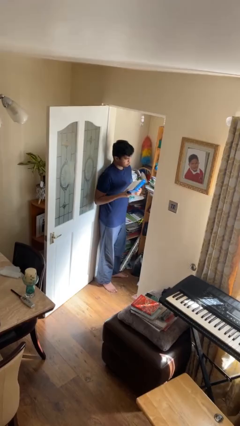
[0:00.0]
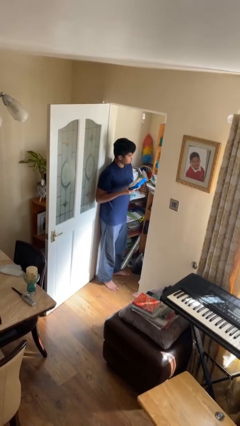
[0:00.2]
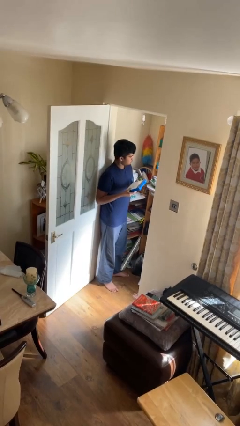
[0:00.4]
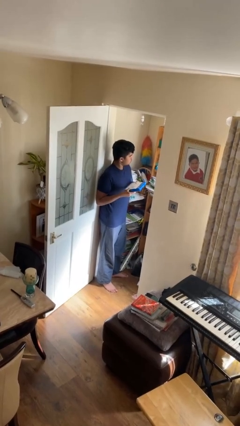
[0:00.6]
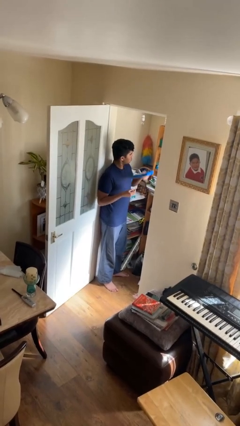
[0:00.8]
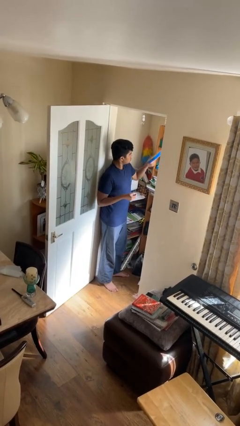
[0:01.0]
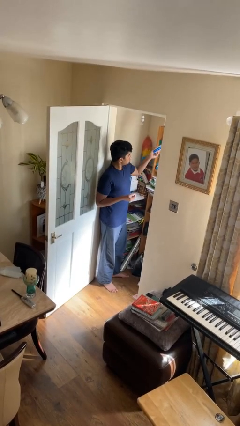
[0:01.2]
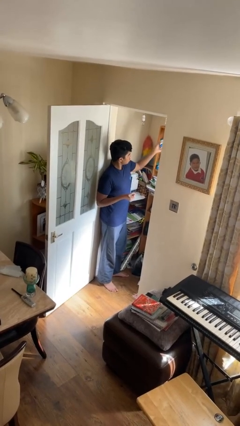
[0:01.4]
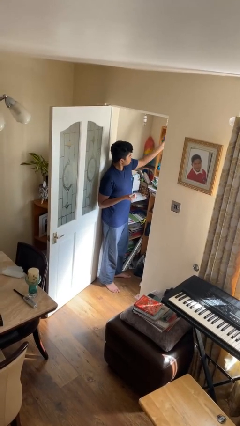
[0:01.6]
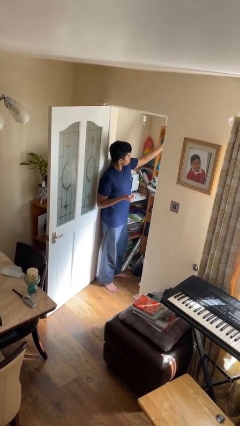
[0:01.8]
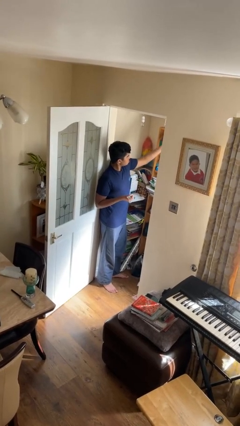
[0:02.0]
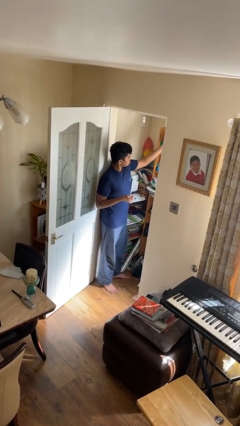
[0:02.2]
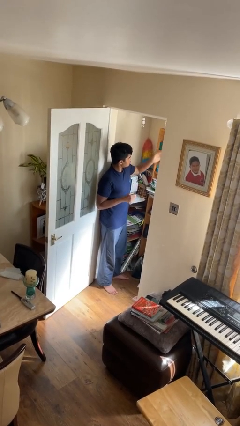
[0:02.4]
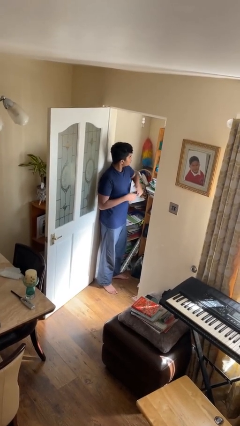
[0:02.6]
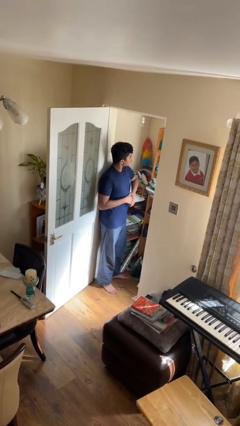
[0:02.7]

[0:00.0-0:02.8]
person puts down object on shelf

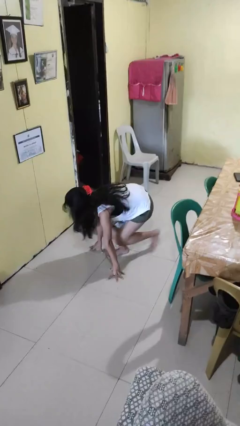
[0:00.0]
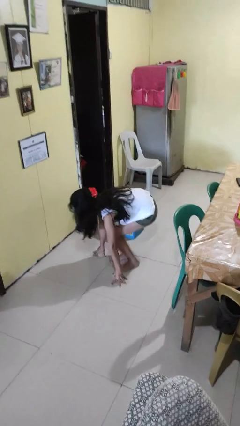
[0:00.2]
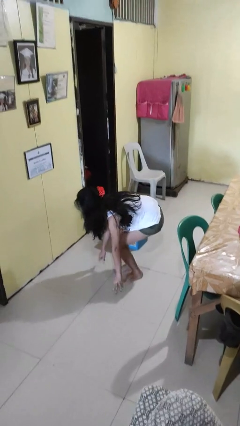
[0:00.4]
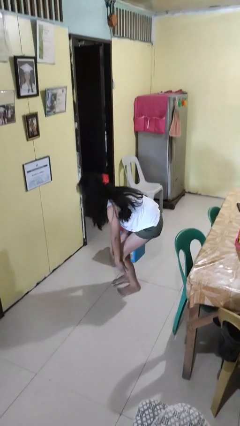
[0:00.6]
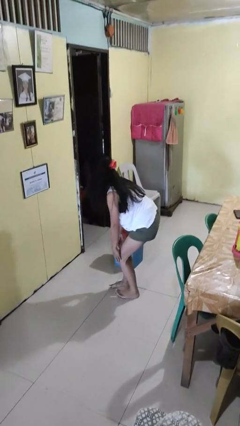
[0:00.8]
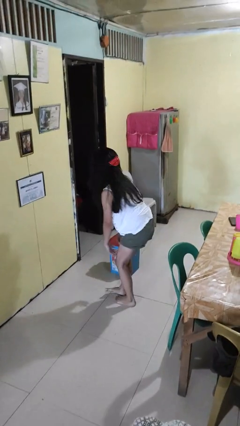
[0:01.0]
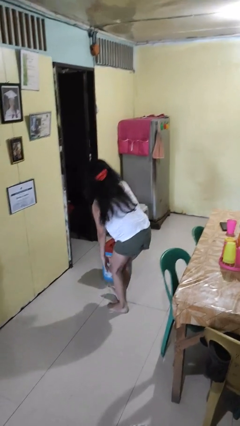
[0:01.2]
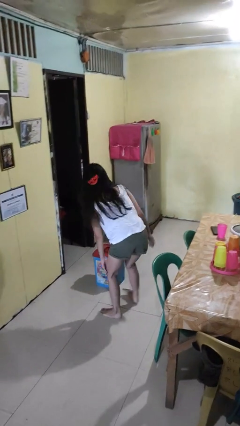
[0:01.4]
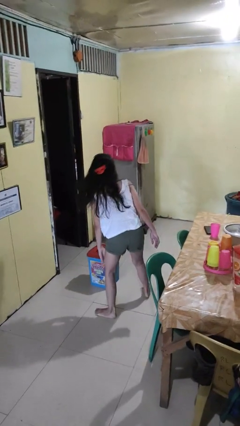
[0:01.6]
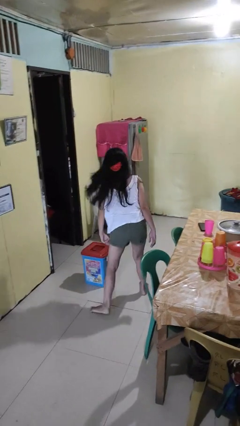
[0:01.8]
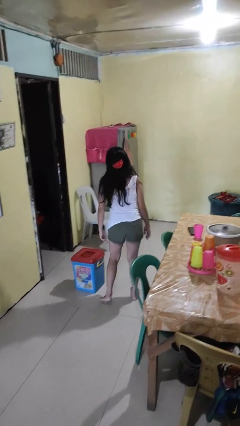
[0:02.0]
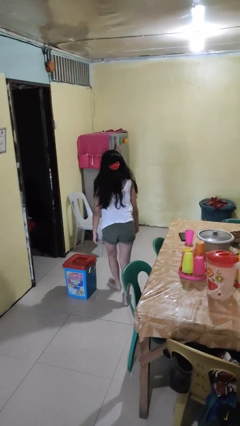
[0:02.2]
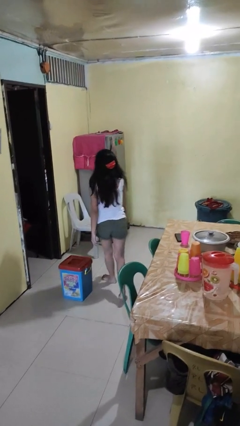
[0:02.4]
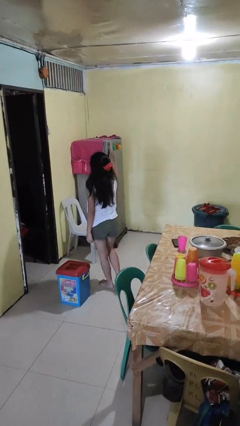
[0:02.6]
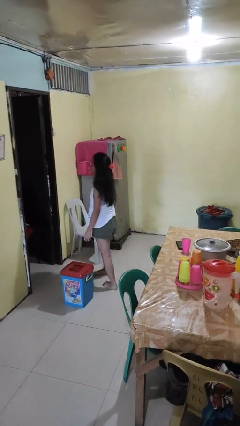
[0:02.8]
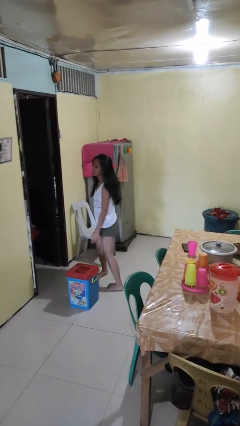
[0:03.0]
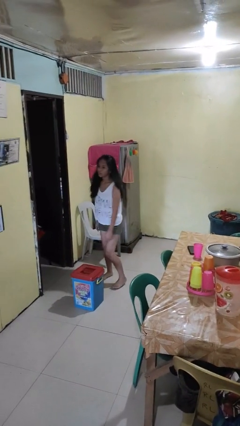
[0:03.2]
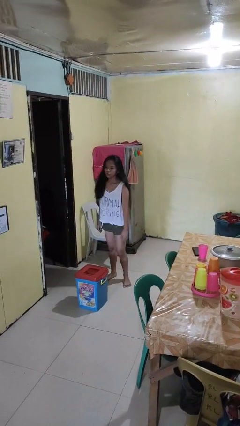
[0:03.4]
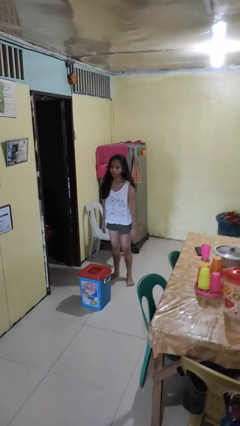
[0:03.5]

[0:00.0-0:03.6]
person stands up from floor

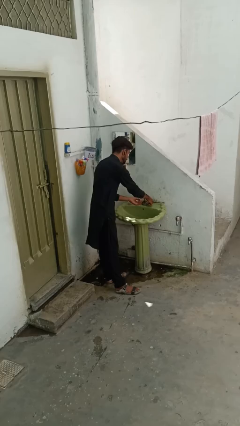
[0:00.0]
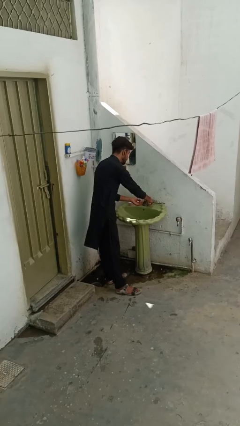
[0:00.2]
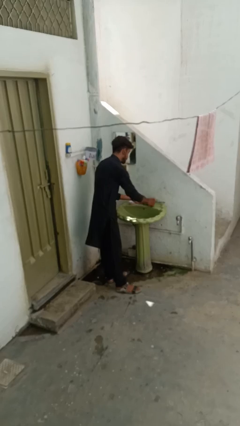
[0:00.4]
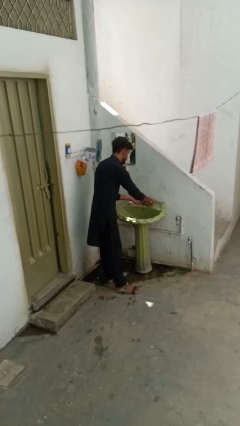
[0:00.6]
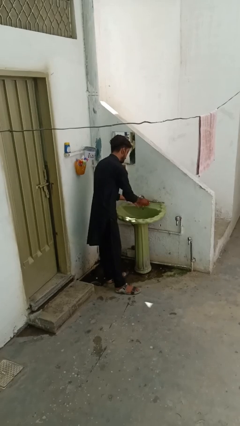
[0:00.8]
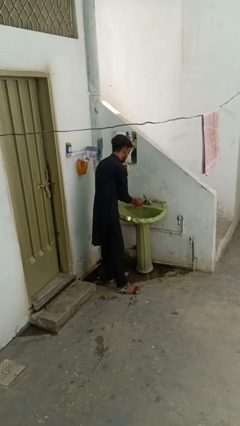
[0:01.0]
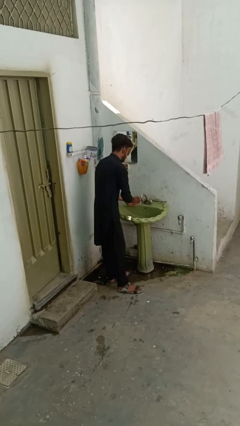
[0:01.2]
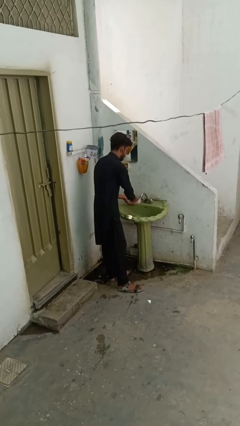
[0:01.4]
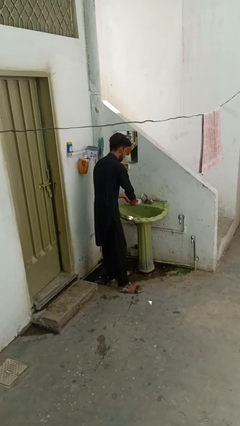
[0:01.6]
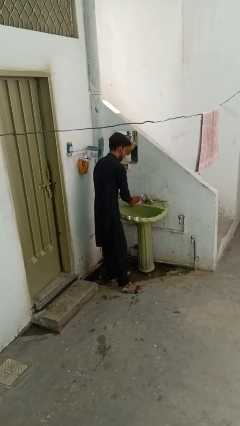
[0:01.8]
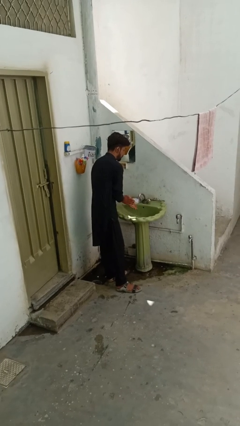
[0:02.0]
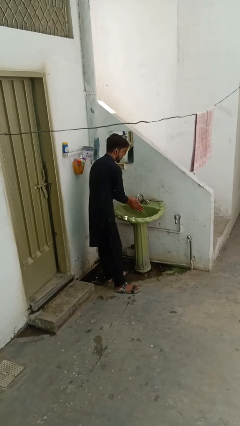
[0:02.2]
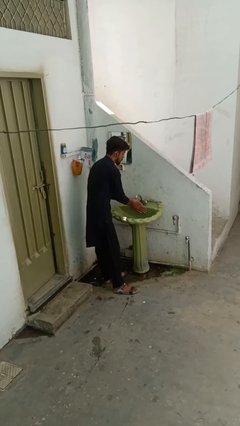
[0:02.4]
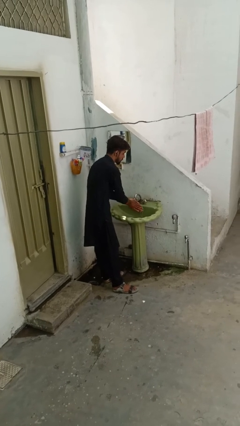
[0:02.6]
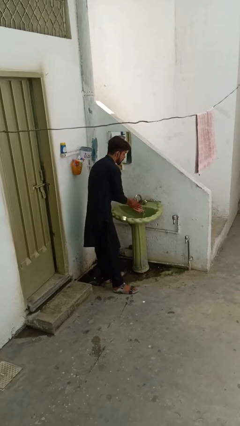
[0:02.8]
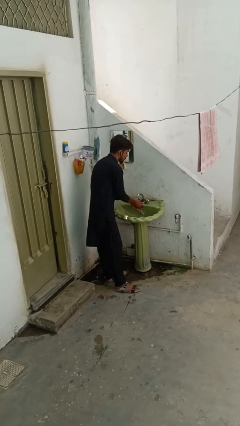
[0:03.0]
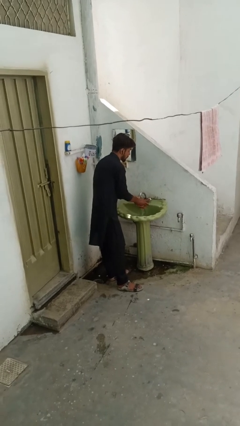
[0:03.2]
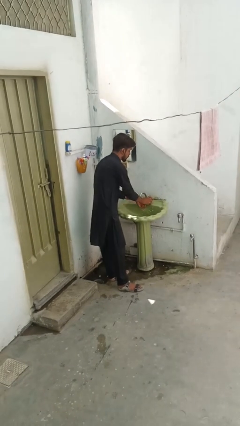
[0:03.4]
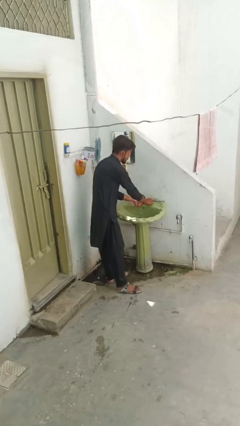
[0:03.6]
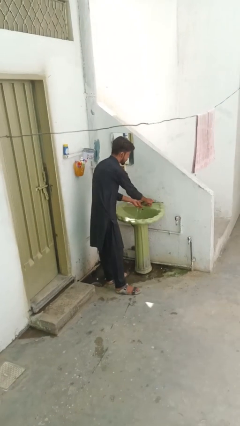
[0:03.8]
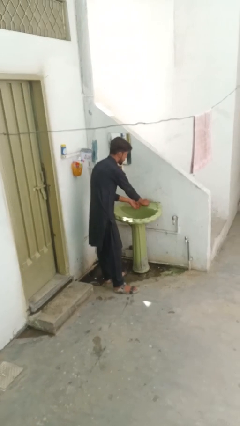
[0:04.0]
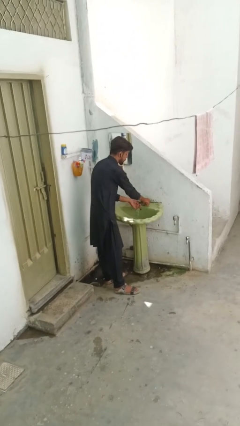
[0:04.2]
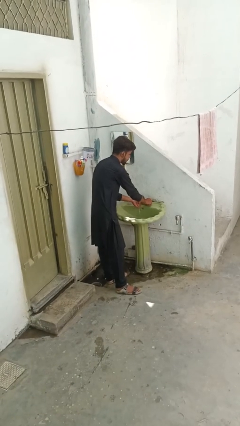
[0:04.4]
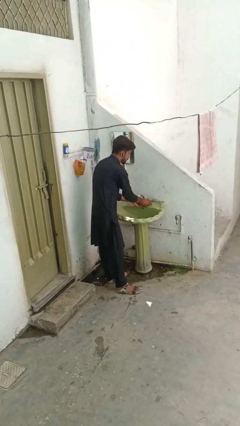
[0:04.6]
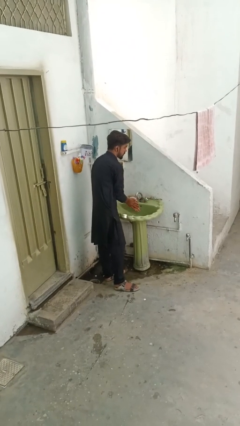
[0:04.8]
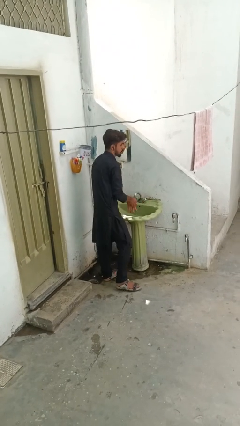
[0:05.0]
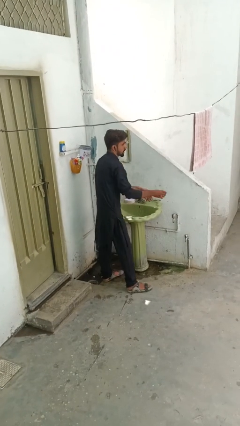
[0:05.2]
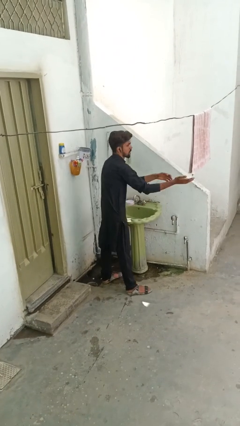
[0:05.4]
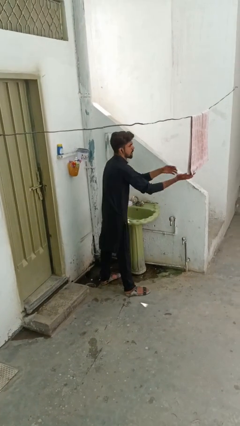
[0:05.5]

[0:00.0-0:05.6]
person washes hands

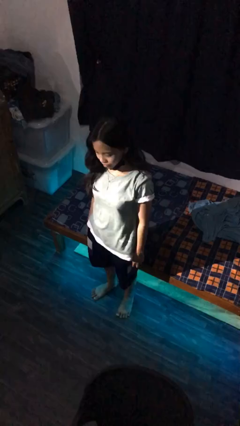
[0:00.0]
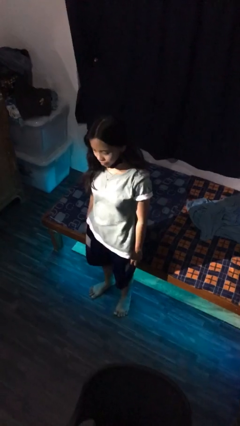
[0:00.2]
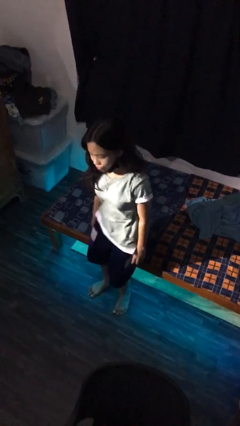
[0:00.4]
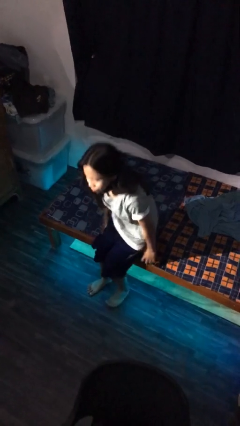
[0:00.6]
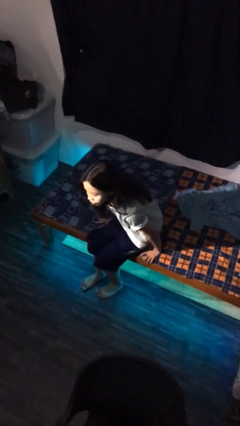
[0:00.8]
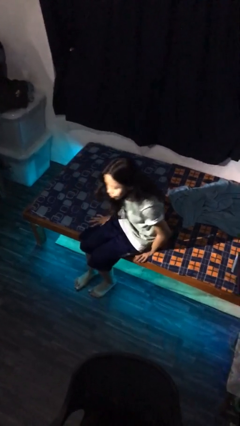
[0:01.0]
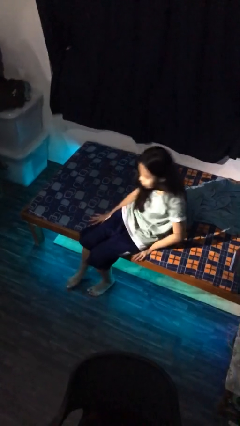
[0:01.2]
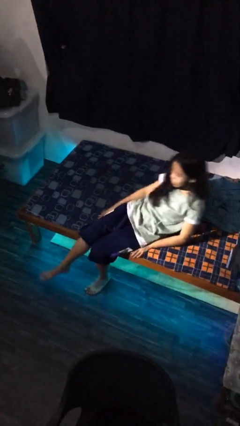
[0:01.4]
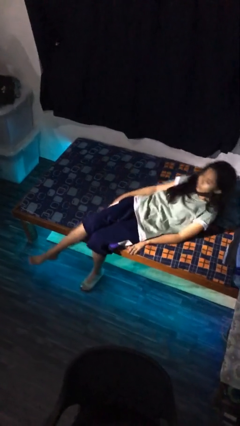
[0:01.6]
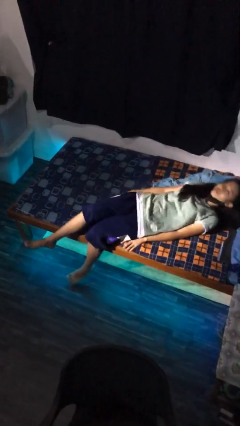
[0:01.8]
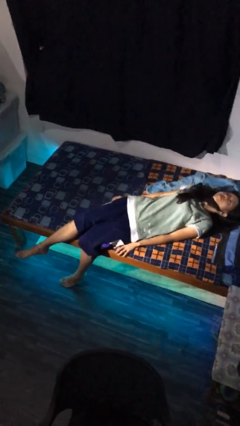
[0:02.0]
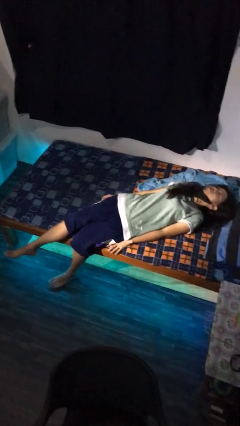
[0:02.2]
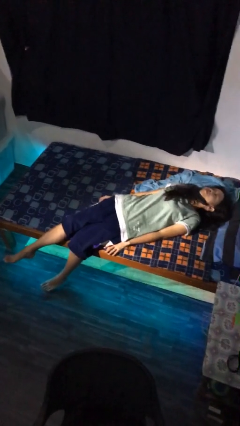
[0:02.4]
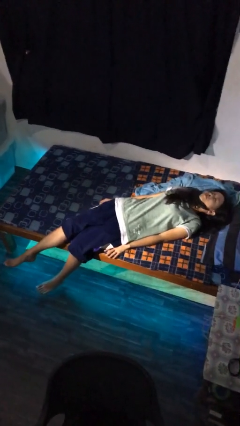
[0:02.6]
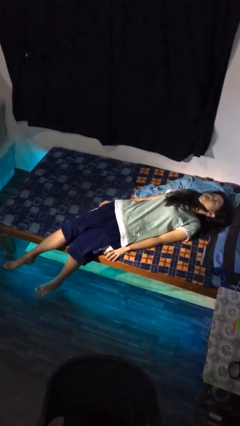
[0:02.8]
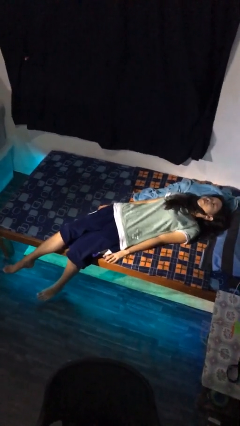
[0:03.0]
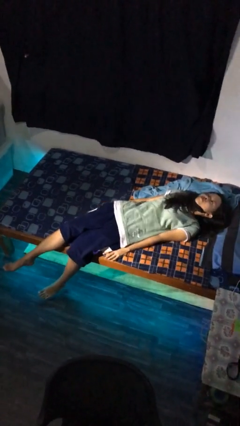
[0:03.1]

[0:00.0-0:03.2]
person lies down on bed

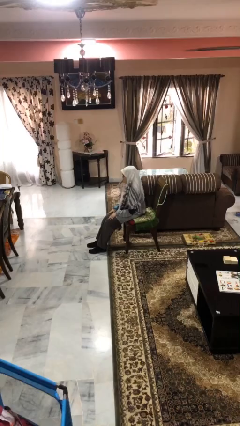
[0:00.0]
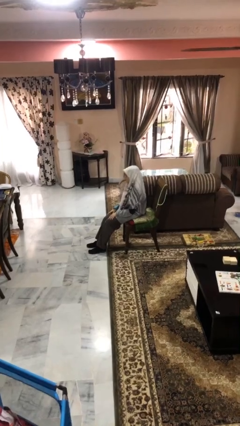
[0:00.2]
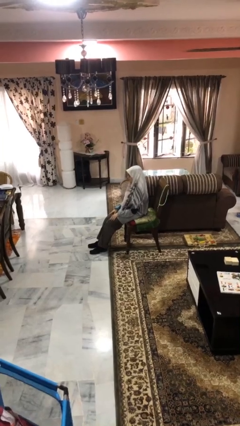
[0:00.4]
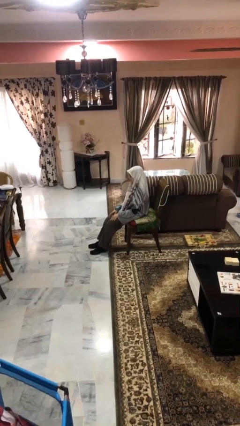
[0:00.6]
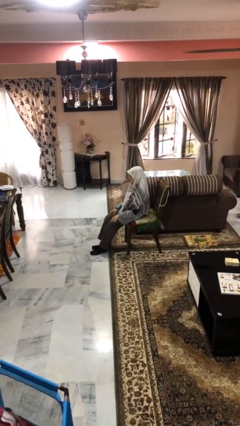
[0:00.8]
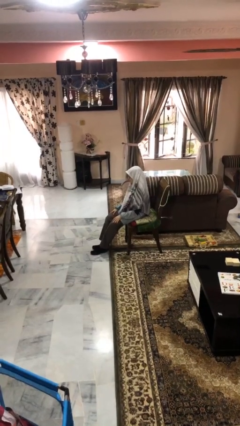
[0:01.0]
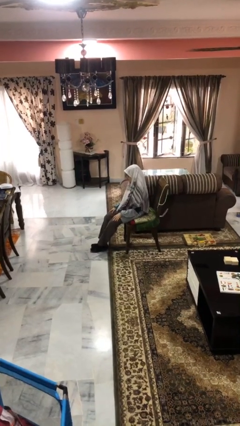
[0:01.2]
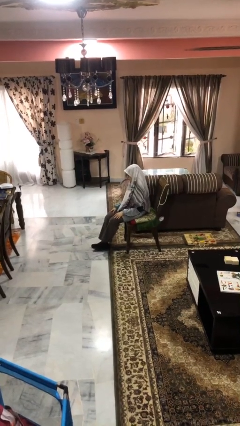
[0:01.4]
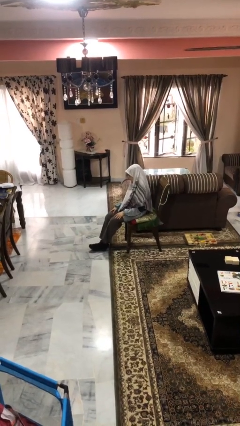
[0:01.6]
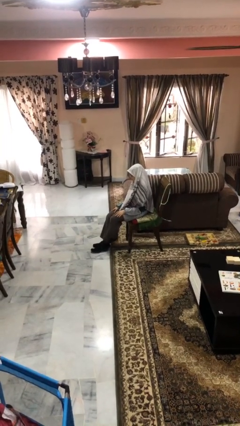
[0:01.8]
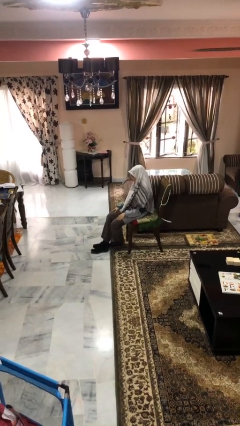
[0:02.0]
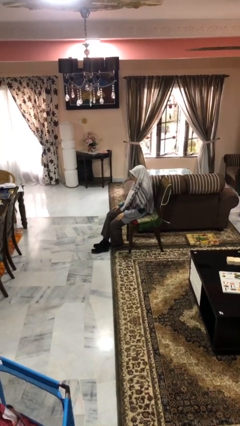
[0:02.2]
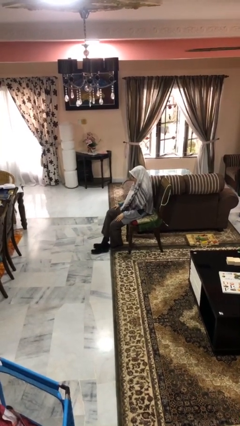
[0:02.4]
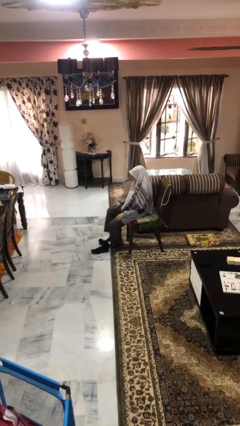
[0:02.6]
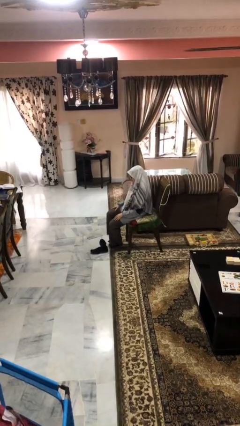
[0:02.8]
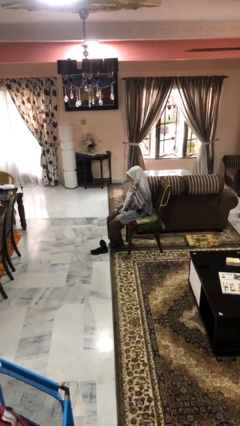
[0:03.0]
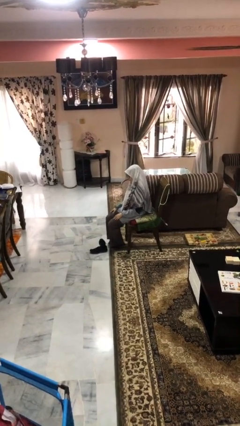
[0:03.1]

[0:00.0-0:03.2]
person takes off shoes
